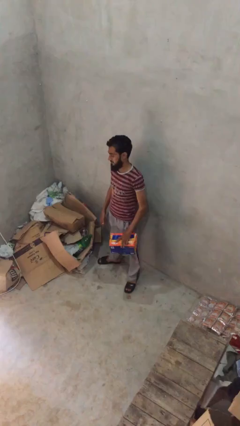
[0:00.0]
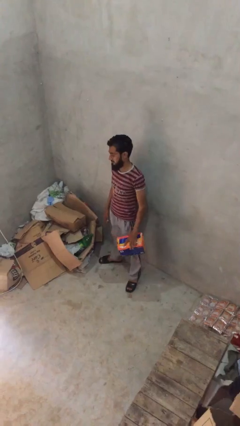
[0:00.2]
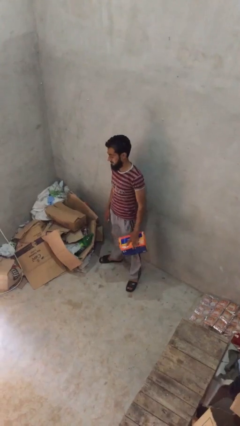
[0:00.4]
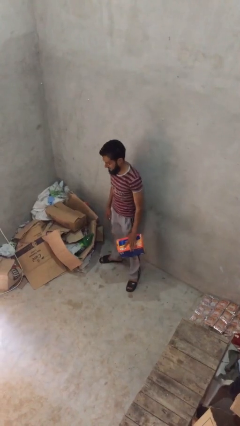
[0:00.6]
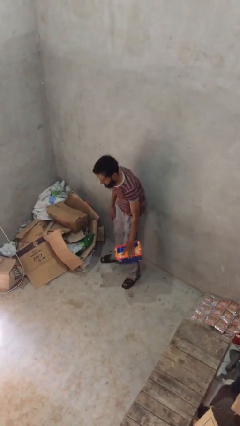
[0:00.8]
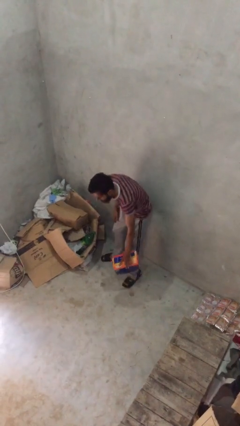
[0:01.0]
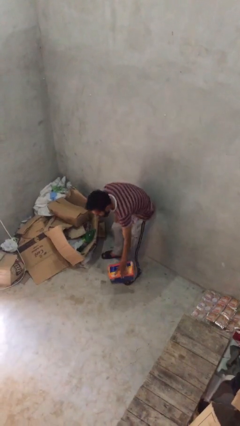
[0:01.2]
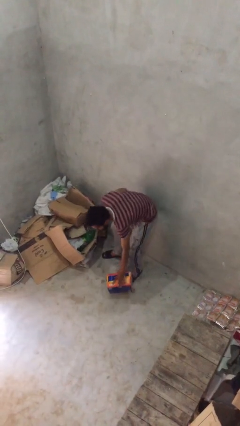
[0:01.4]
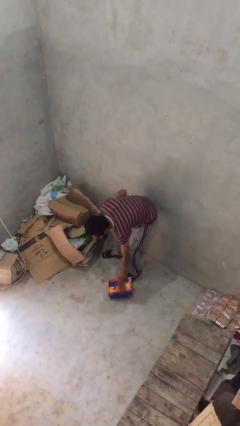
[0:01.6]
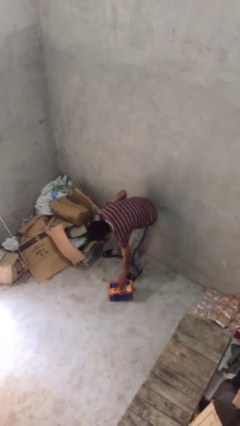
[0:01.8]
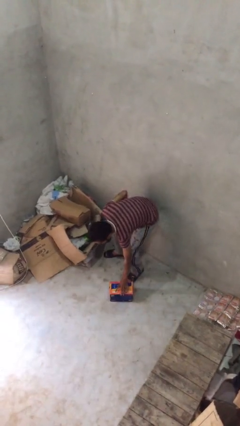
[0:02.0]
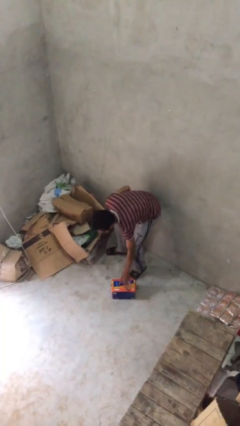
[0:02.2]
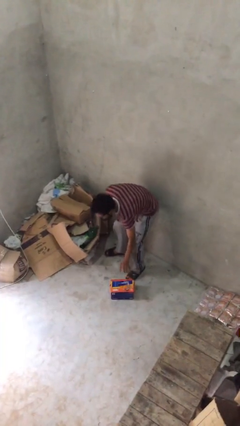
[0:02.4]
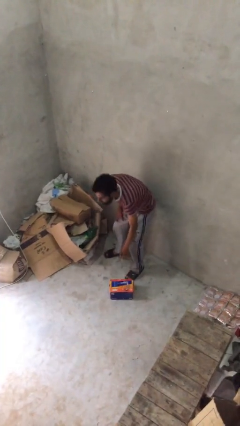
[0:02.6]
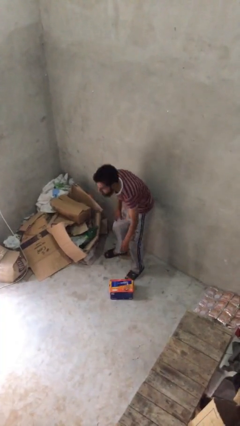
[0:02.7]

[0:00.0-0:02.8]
person puts down object on floor

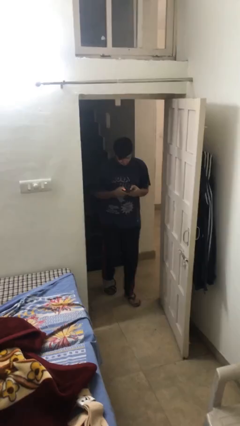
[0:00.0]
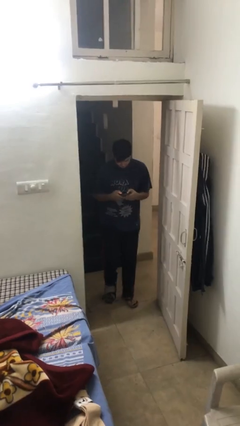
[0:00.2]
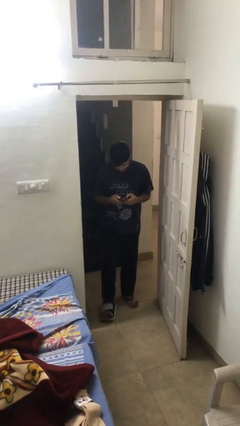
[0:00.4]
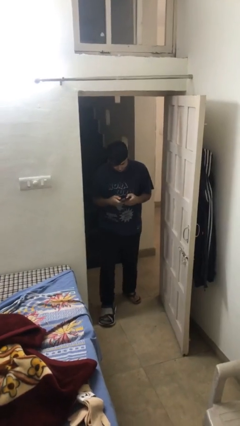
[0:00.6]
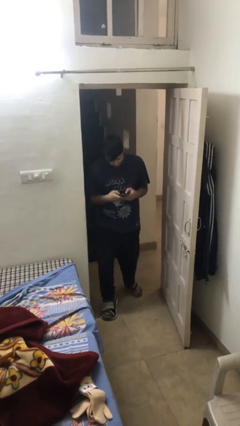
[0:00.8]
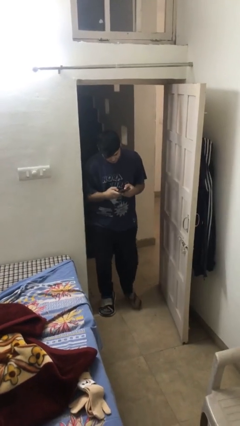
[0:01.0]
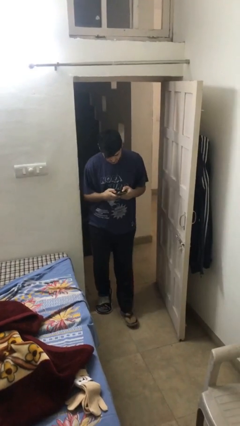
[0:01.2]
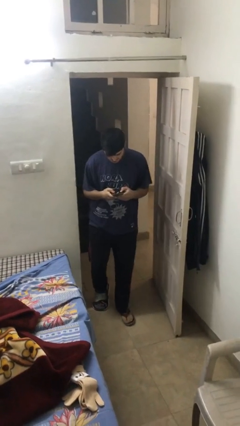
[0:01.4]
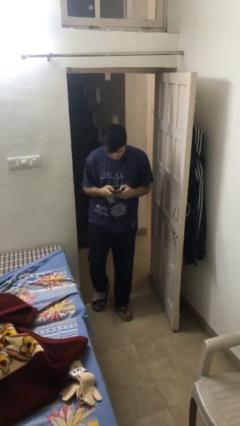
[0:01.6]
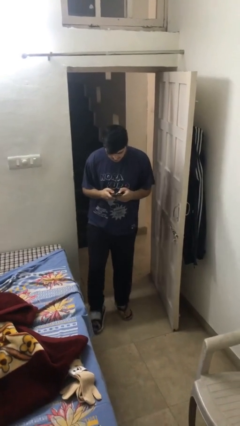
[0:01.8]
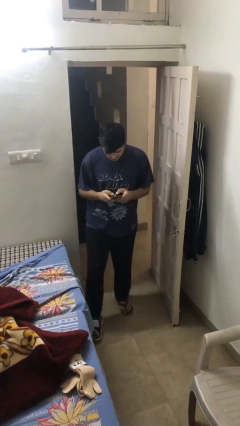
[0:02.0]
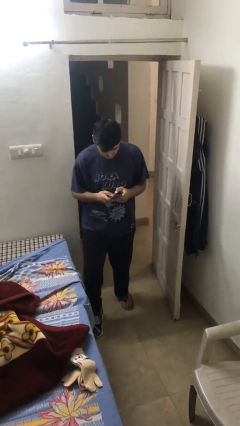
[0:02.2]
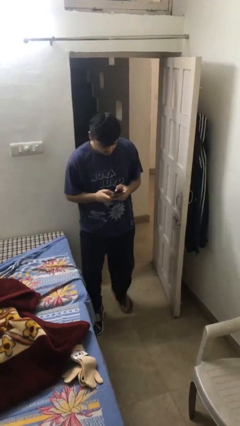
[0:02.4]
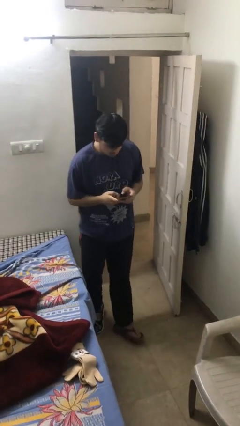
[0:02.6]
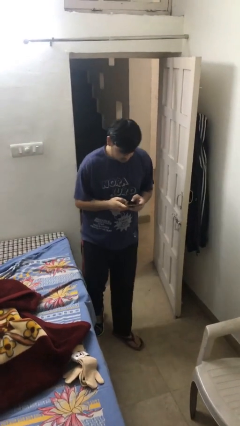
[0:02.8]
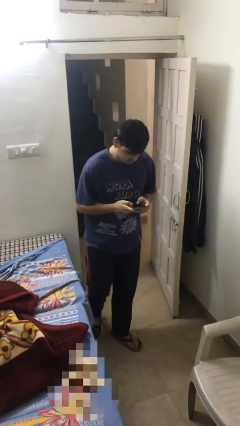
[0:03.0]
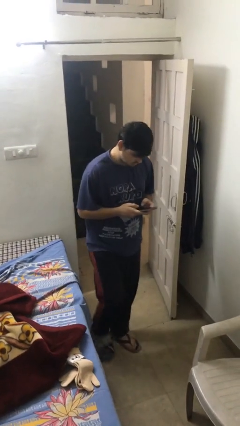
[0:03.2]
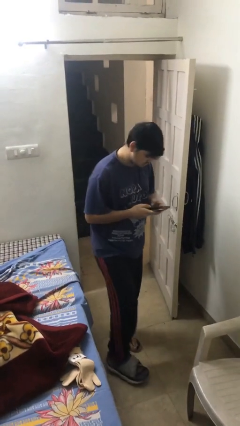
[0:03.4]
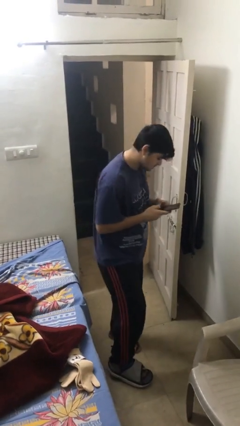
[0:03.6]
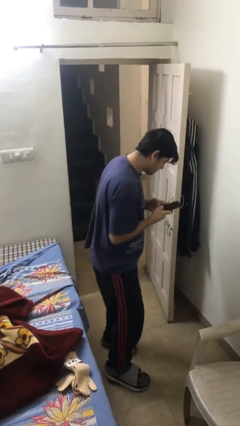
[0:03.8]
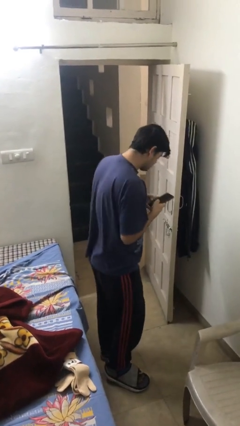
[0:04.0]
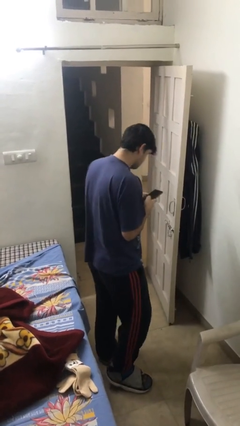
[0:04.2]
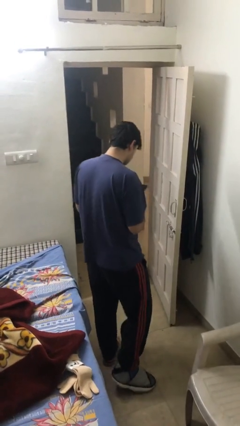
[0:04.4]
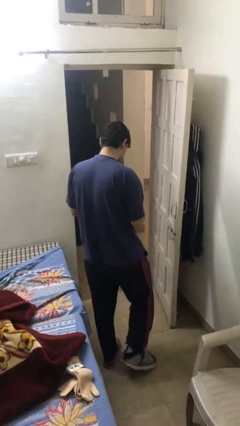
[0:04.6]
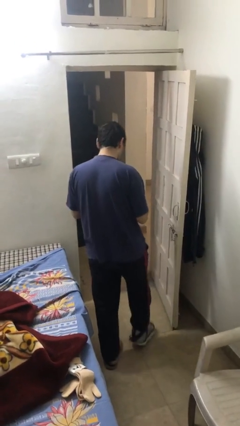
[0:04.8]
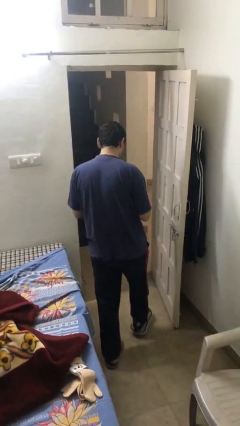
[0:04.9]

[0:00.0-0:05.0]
person enters scene through structure

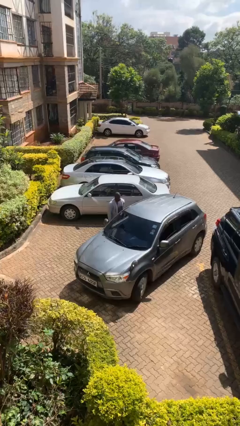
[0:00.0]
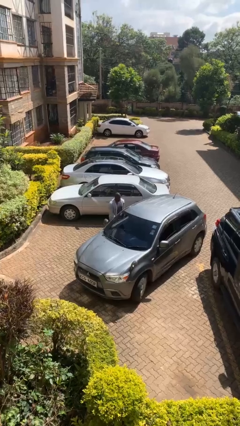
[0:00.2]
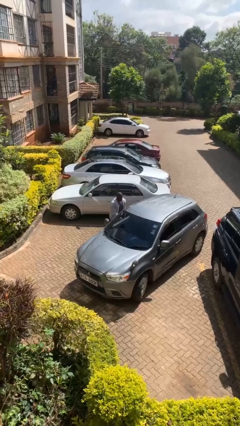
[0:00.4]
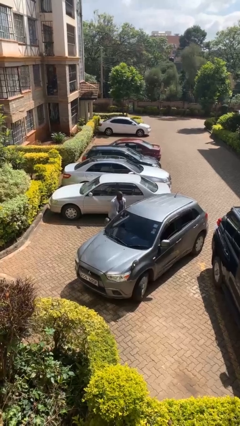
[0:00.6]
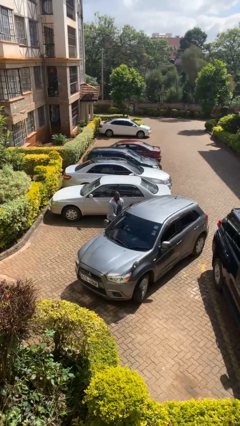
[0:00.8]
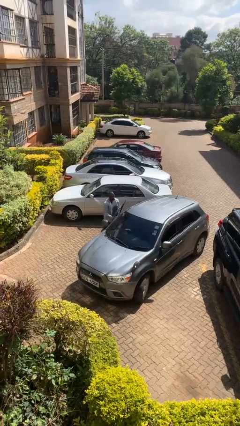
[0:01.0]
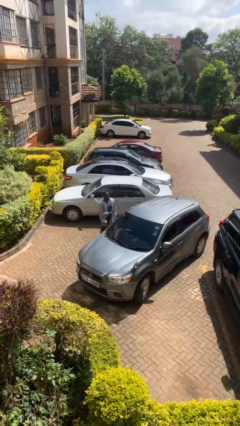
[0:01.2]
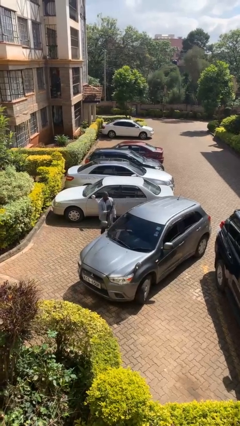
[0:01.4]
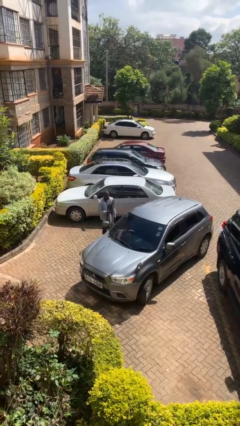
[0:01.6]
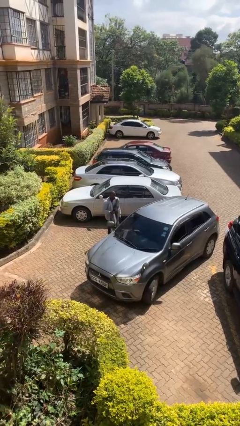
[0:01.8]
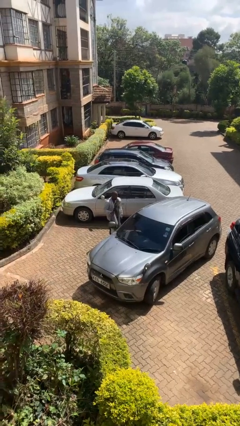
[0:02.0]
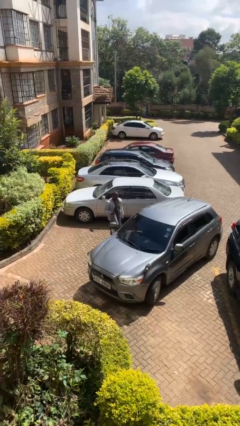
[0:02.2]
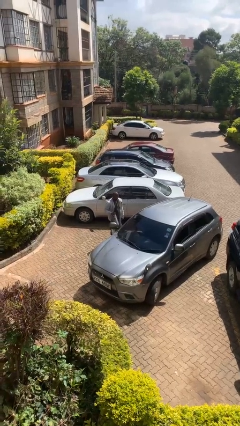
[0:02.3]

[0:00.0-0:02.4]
person opens car door

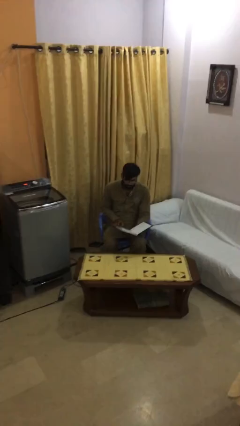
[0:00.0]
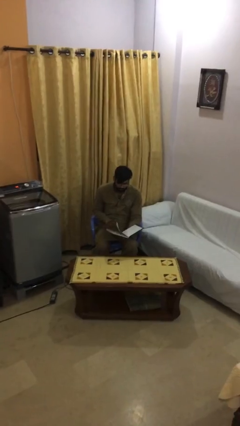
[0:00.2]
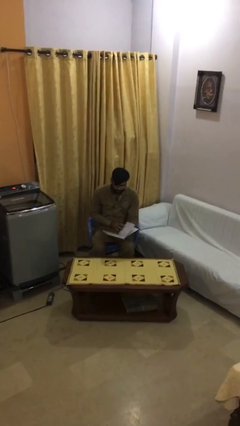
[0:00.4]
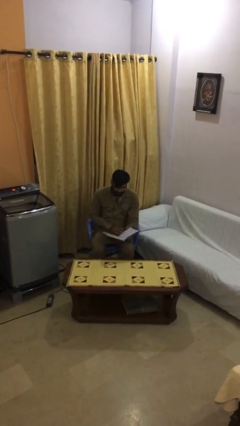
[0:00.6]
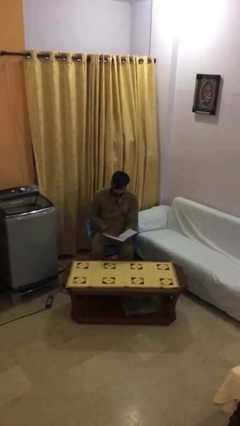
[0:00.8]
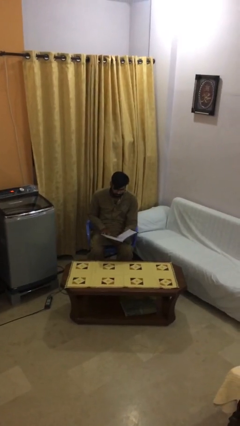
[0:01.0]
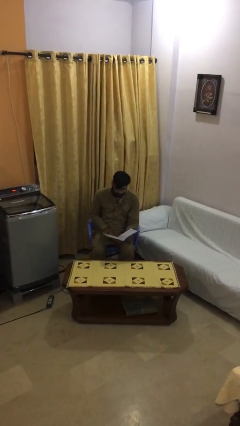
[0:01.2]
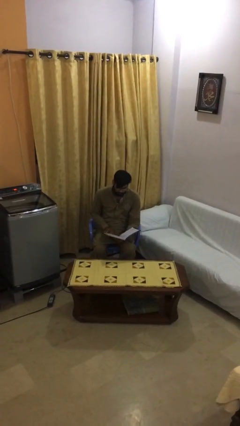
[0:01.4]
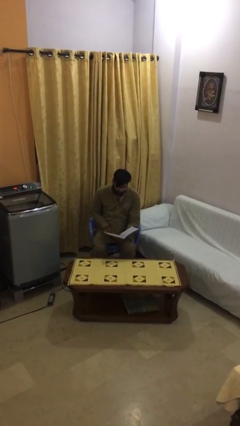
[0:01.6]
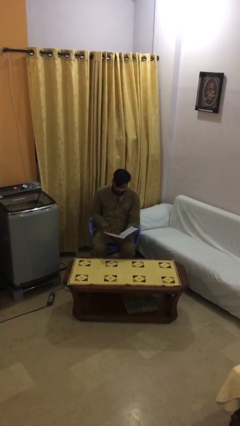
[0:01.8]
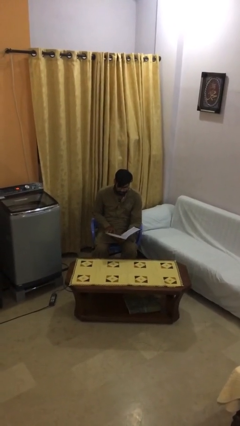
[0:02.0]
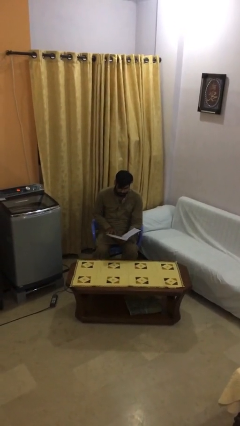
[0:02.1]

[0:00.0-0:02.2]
person reads document

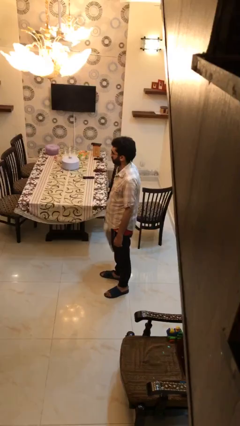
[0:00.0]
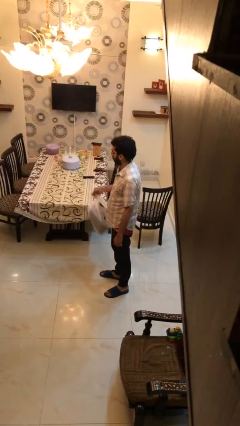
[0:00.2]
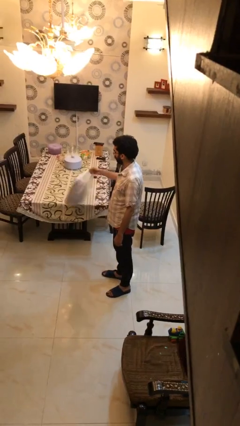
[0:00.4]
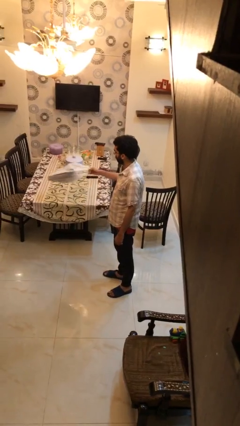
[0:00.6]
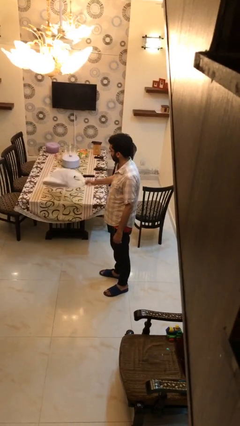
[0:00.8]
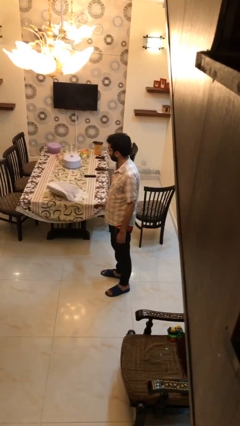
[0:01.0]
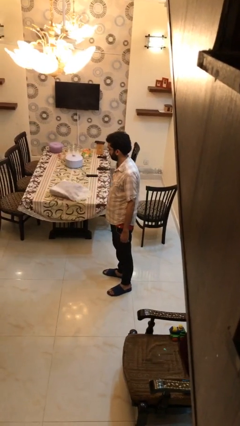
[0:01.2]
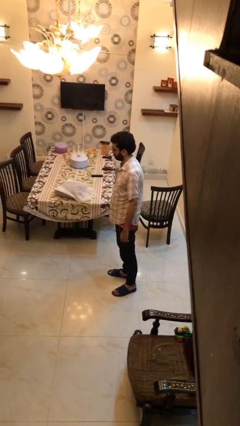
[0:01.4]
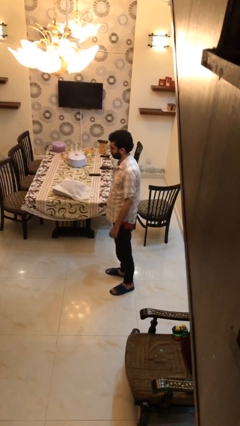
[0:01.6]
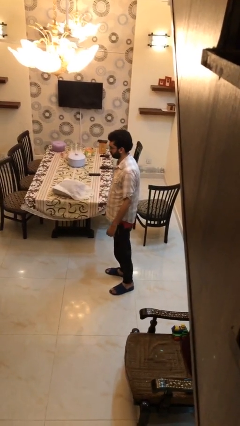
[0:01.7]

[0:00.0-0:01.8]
person puts down object on table

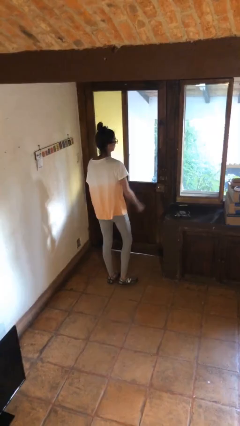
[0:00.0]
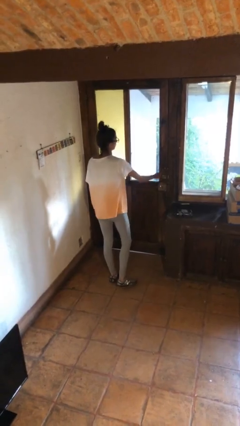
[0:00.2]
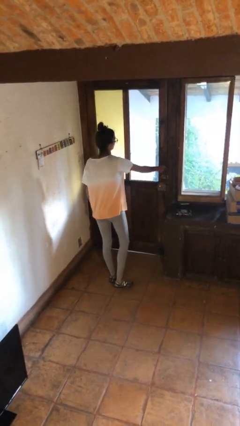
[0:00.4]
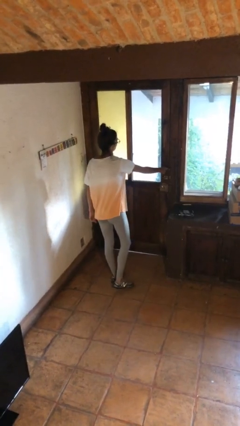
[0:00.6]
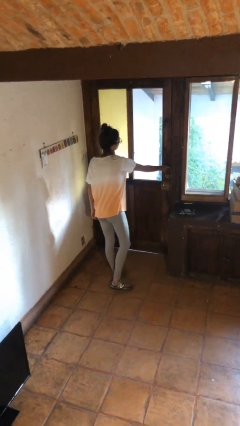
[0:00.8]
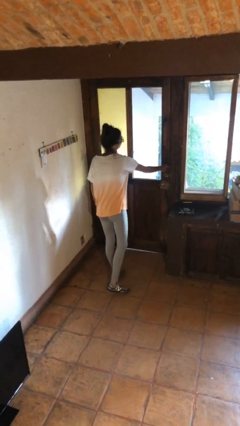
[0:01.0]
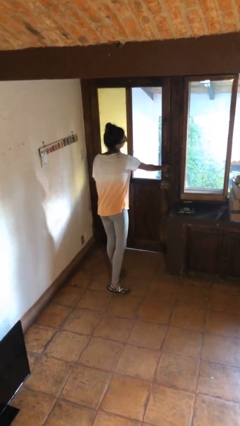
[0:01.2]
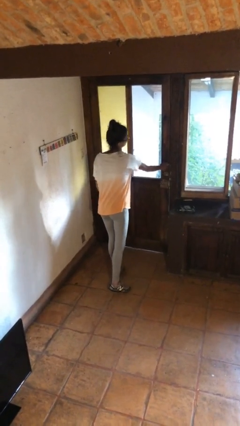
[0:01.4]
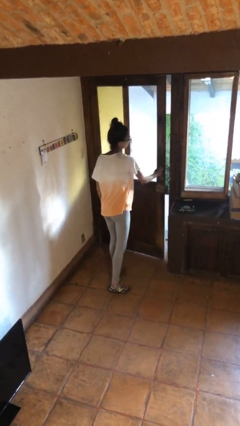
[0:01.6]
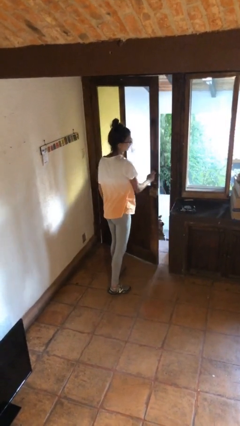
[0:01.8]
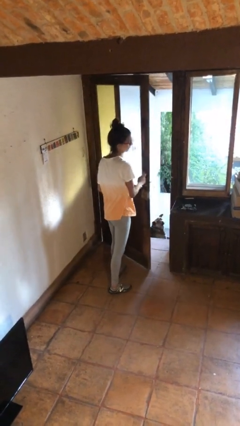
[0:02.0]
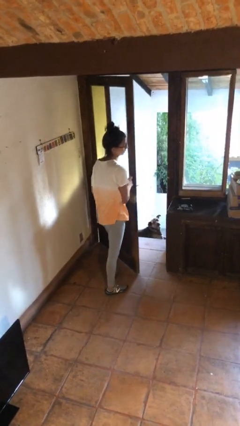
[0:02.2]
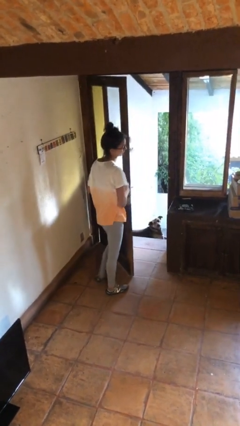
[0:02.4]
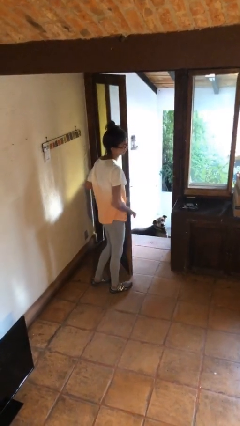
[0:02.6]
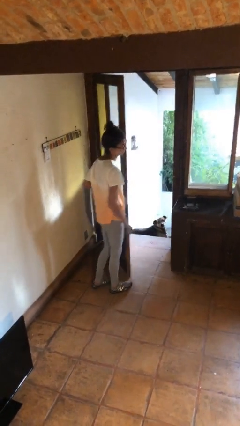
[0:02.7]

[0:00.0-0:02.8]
person opens facility door
